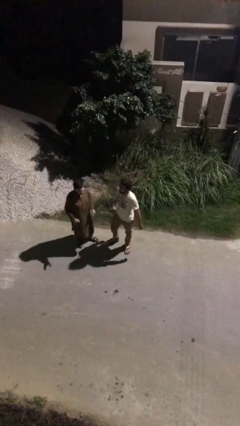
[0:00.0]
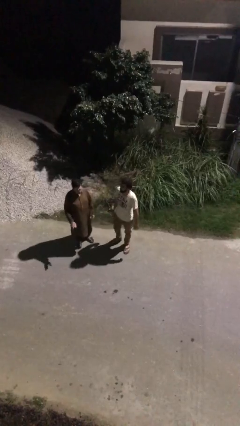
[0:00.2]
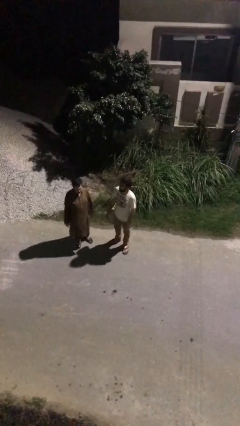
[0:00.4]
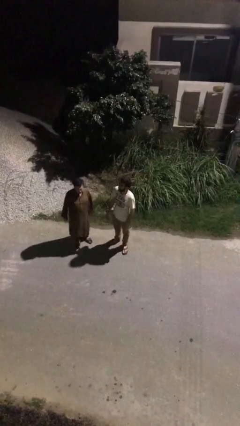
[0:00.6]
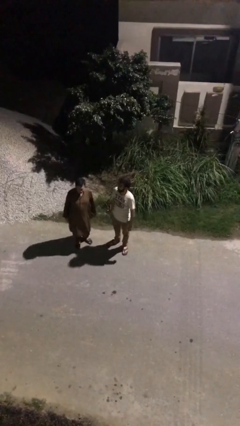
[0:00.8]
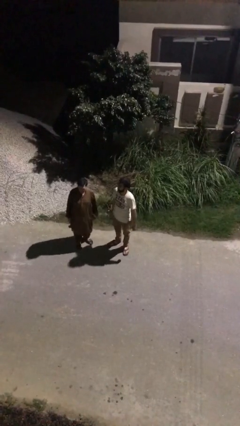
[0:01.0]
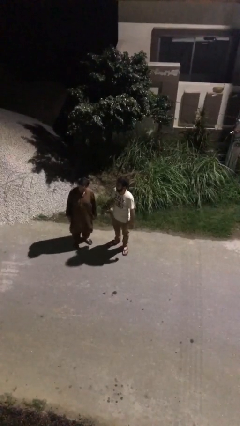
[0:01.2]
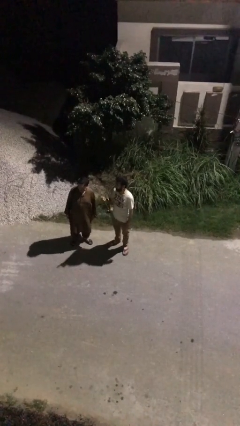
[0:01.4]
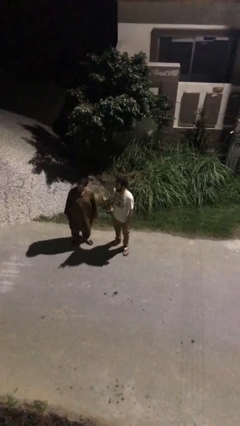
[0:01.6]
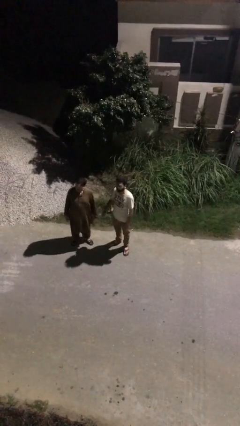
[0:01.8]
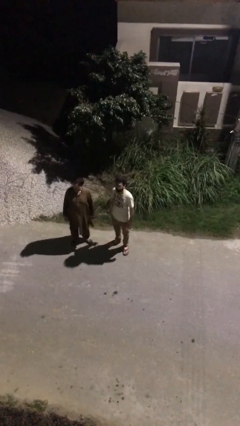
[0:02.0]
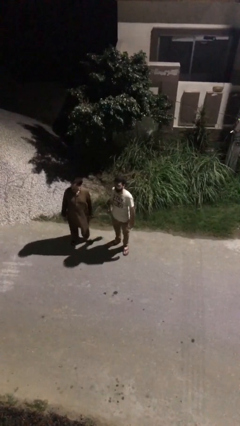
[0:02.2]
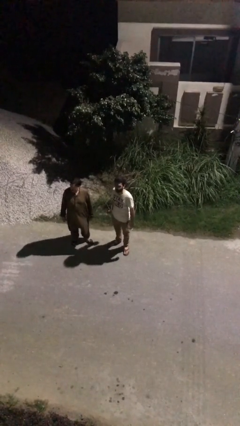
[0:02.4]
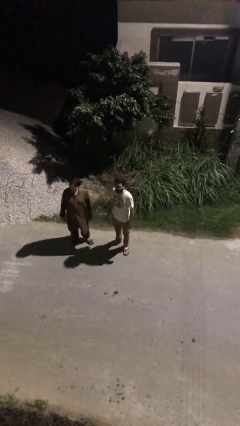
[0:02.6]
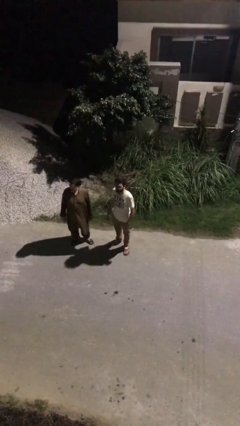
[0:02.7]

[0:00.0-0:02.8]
person talks to person

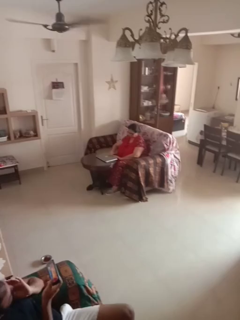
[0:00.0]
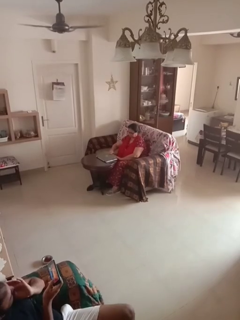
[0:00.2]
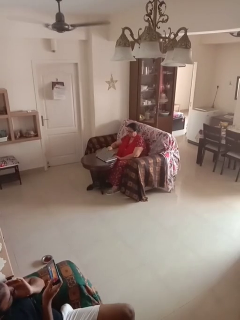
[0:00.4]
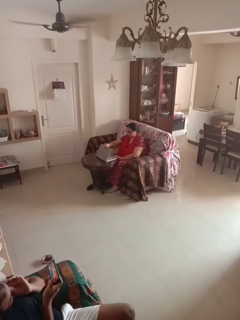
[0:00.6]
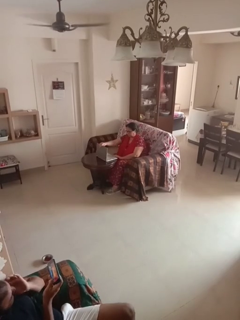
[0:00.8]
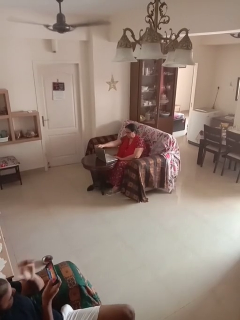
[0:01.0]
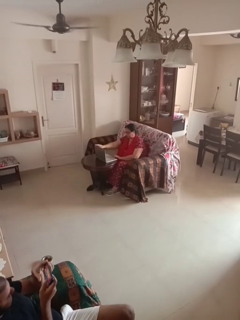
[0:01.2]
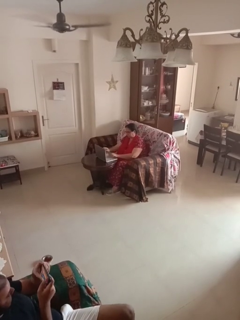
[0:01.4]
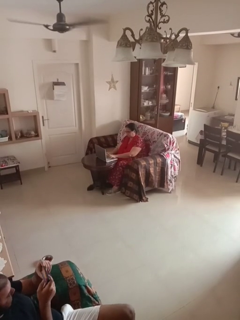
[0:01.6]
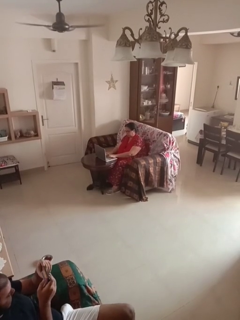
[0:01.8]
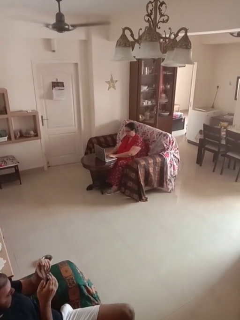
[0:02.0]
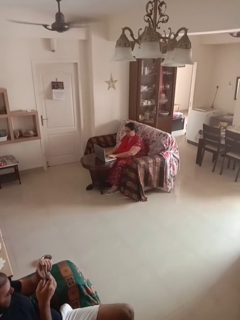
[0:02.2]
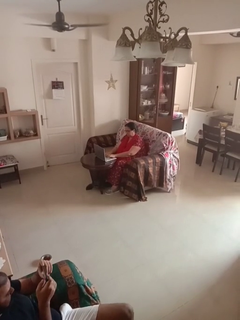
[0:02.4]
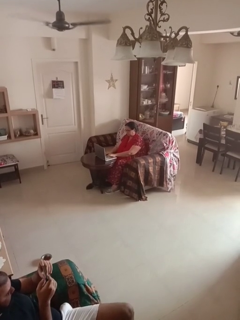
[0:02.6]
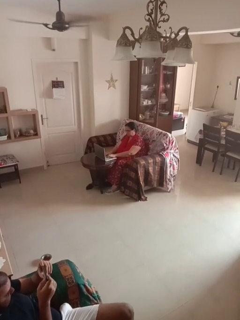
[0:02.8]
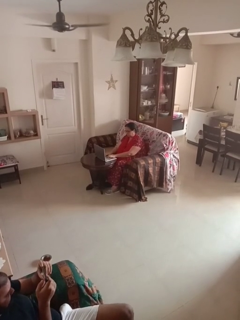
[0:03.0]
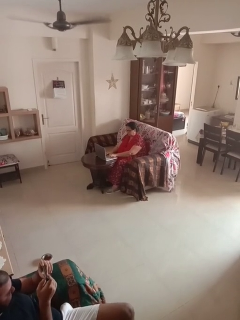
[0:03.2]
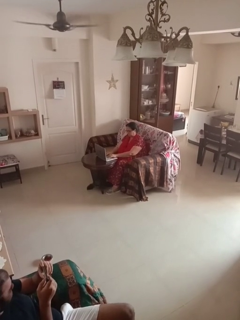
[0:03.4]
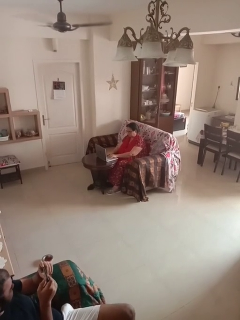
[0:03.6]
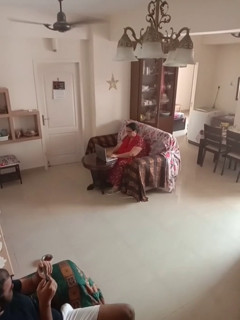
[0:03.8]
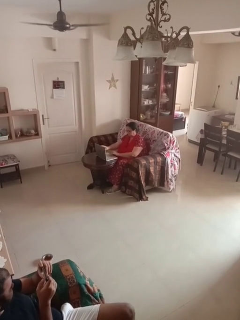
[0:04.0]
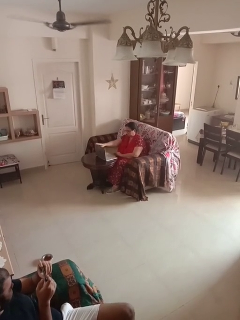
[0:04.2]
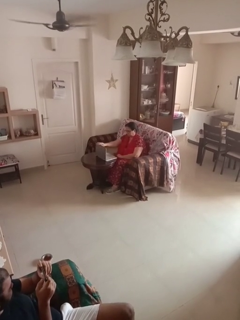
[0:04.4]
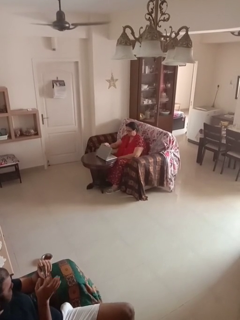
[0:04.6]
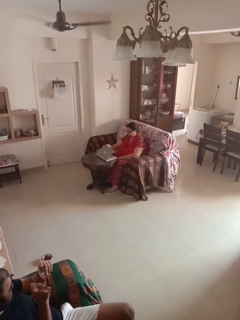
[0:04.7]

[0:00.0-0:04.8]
person interacts with laptop

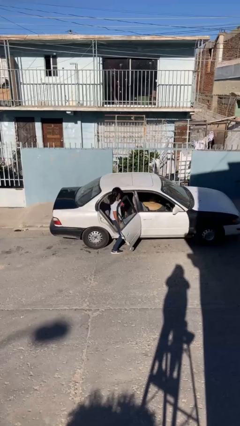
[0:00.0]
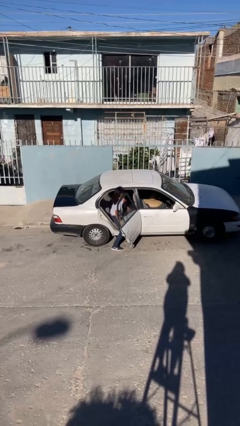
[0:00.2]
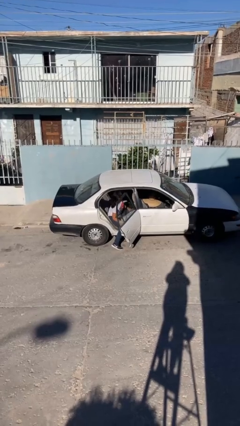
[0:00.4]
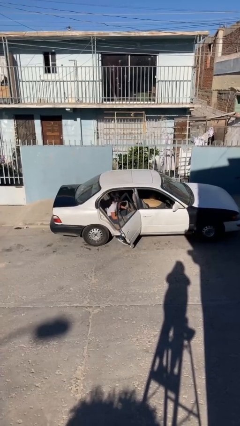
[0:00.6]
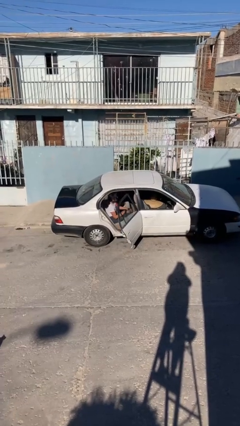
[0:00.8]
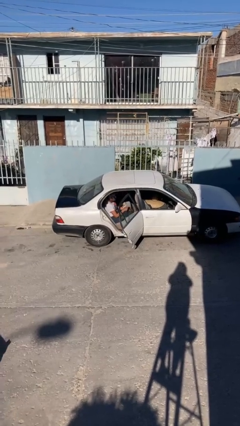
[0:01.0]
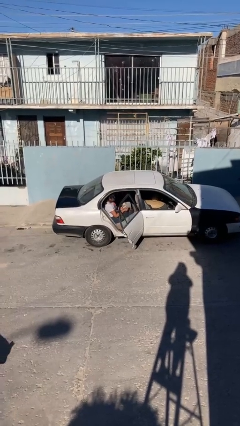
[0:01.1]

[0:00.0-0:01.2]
person enters car

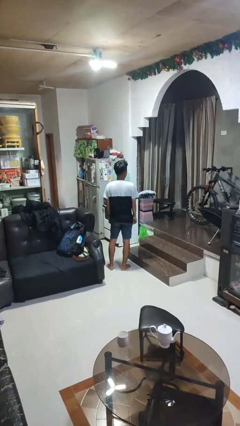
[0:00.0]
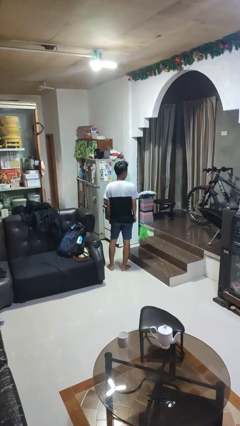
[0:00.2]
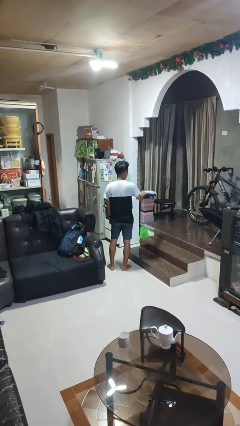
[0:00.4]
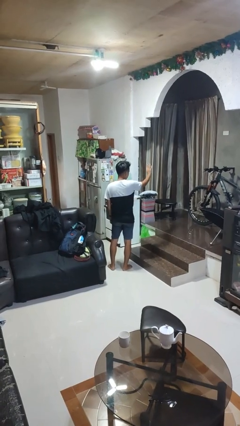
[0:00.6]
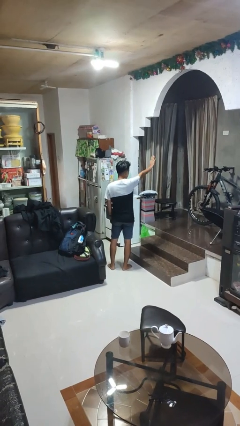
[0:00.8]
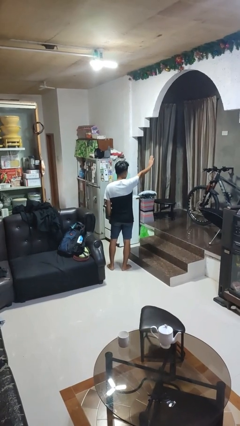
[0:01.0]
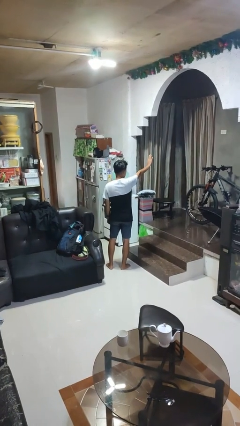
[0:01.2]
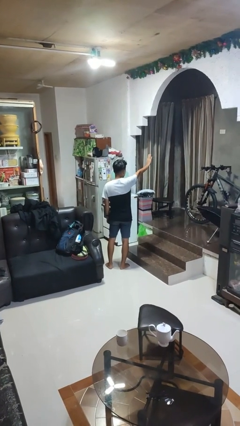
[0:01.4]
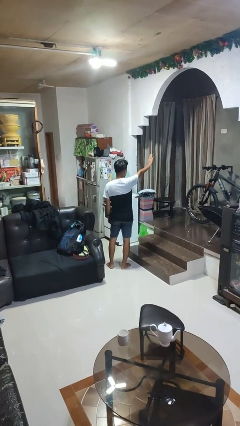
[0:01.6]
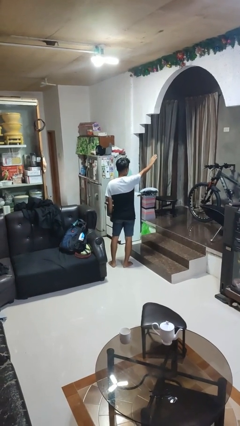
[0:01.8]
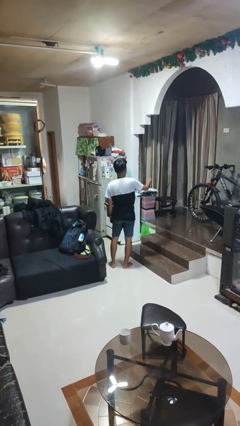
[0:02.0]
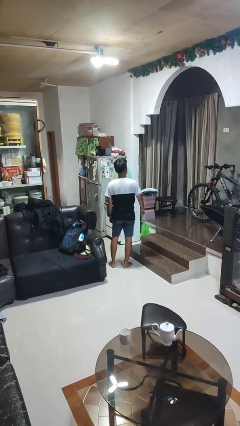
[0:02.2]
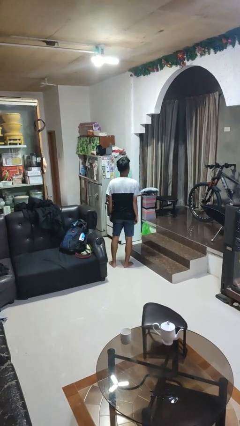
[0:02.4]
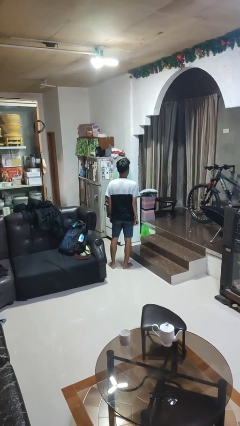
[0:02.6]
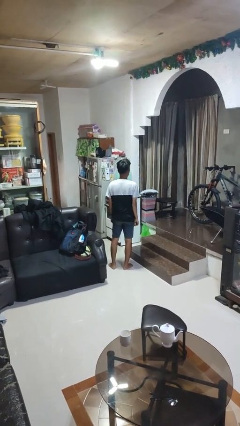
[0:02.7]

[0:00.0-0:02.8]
person gestures stop

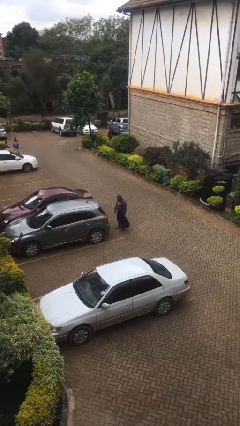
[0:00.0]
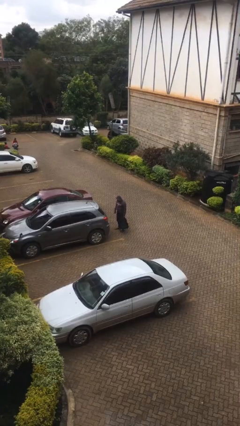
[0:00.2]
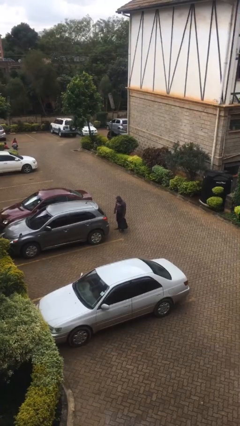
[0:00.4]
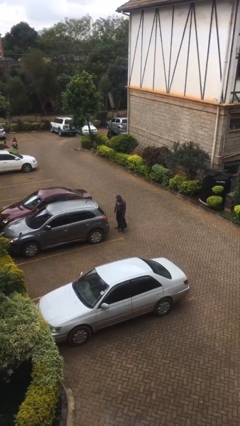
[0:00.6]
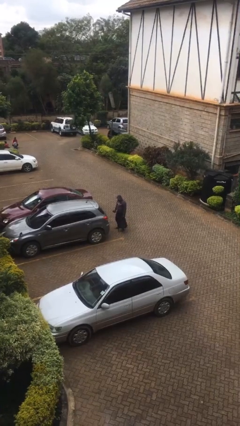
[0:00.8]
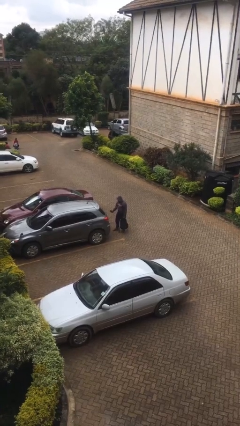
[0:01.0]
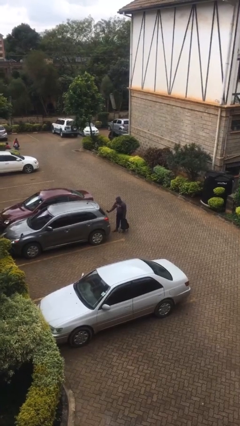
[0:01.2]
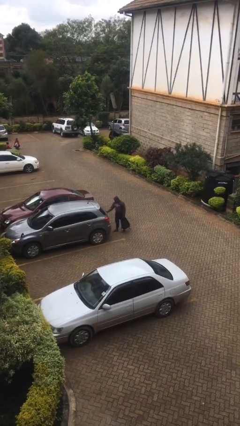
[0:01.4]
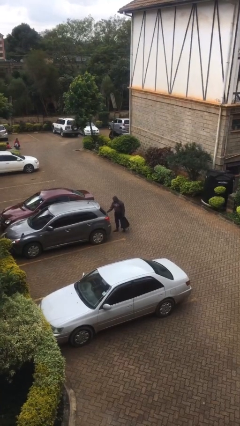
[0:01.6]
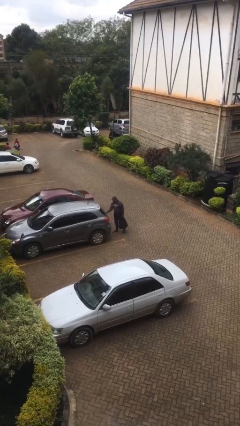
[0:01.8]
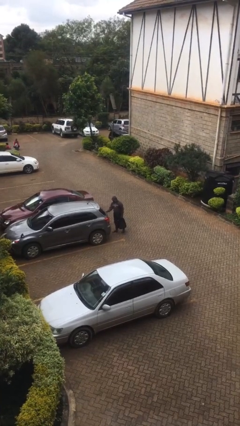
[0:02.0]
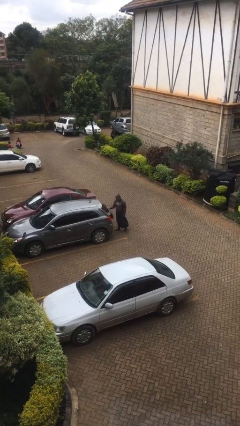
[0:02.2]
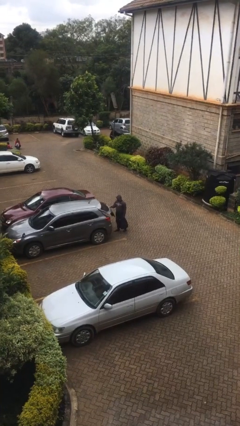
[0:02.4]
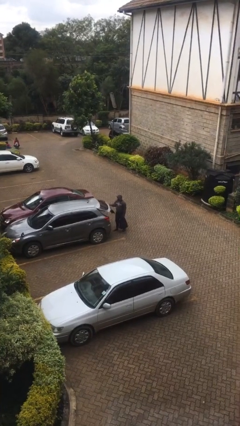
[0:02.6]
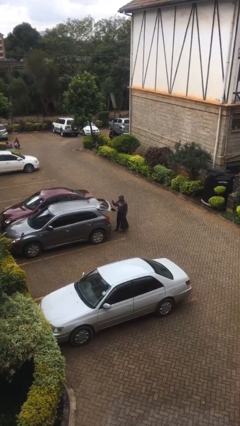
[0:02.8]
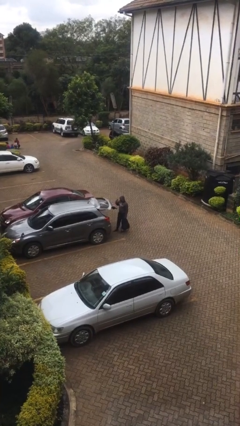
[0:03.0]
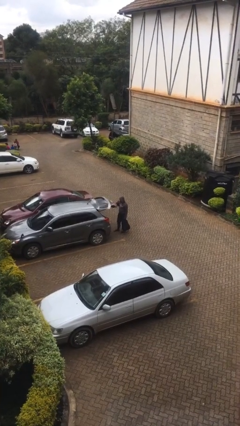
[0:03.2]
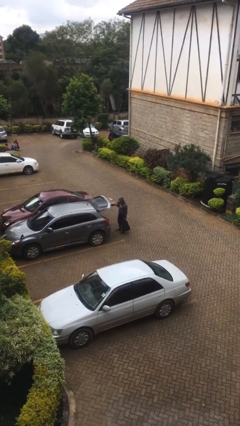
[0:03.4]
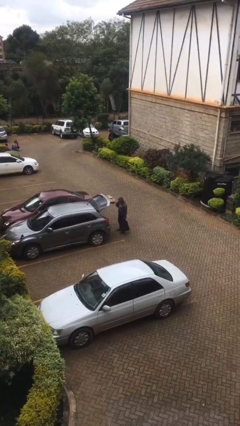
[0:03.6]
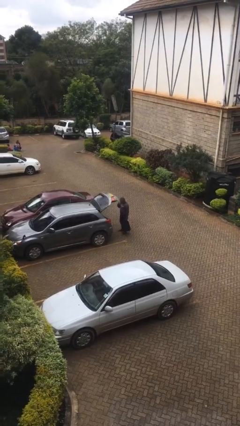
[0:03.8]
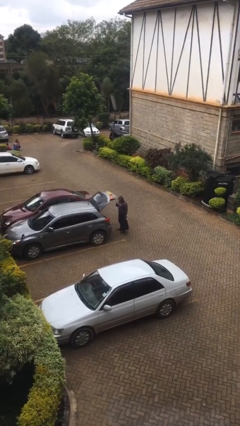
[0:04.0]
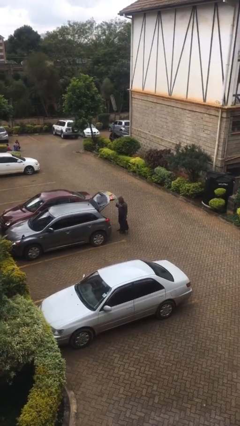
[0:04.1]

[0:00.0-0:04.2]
person opens car trunk

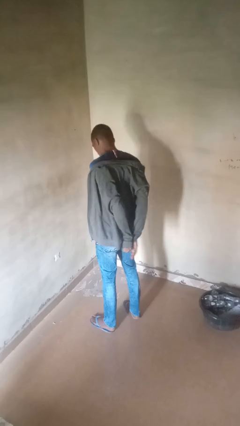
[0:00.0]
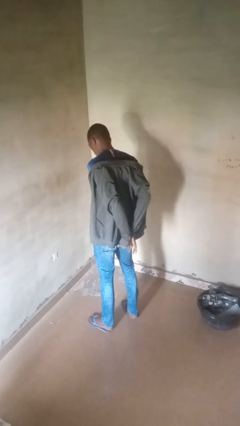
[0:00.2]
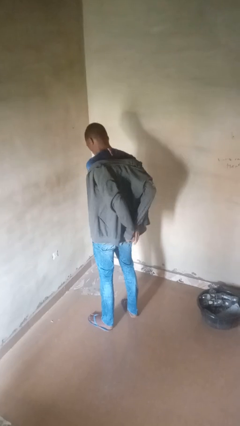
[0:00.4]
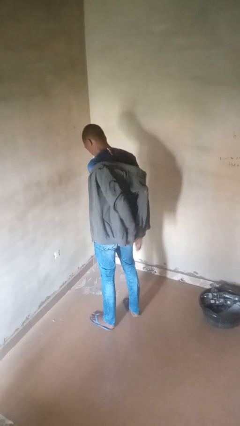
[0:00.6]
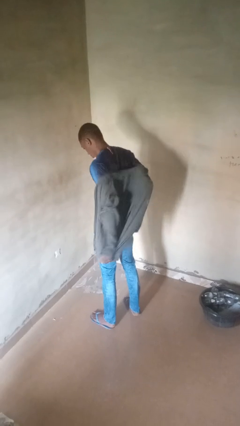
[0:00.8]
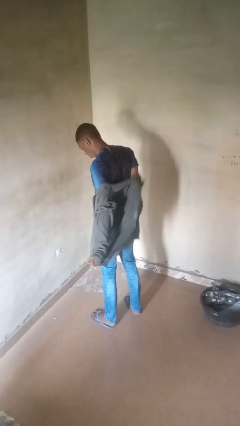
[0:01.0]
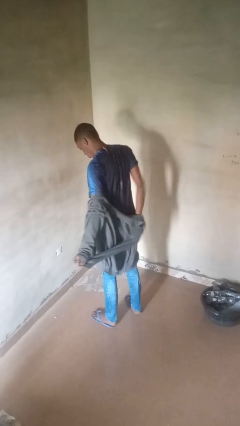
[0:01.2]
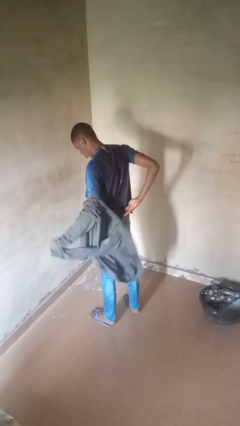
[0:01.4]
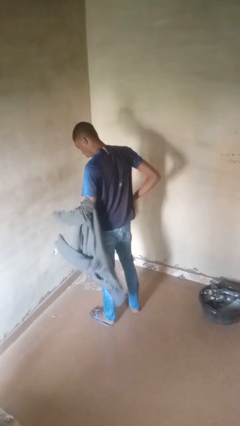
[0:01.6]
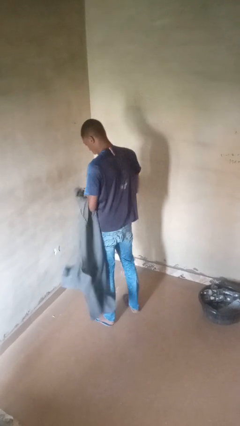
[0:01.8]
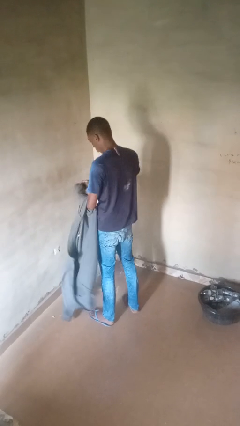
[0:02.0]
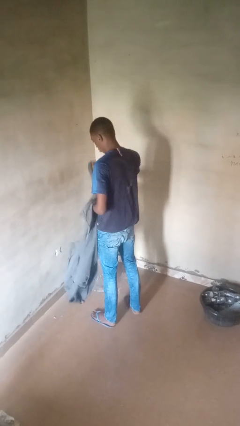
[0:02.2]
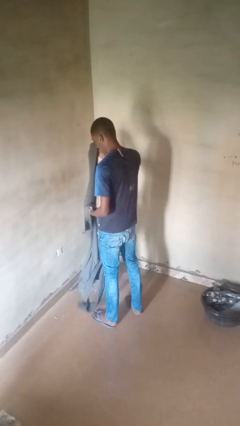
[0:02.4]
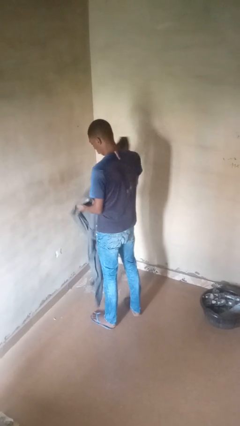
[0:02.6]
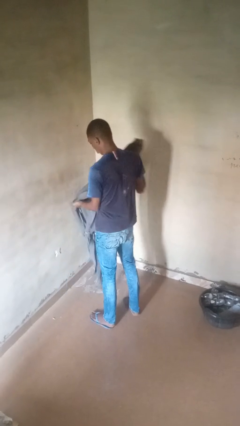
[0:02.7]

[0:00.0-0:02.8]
person takes off jacket
